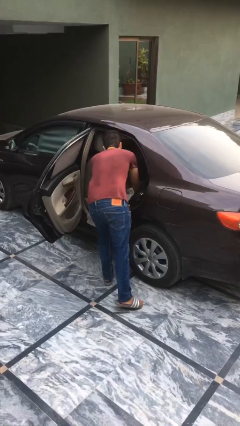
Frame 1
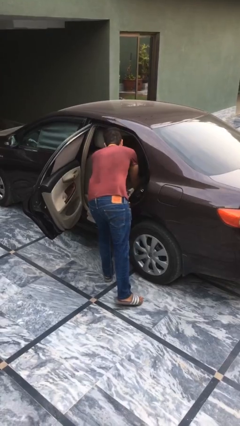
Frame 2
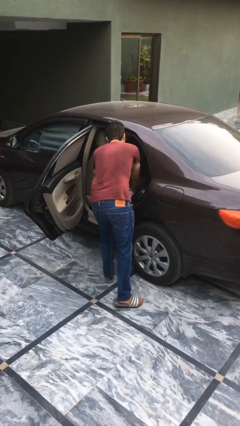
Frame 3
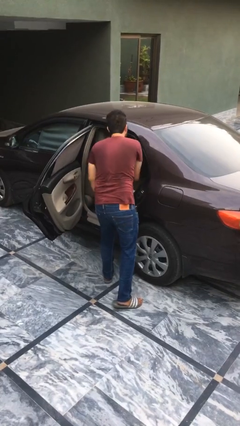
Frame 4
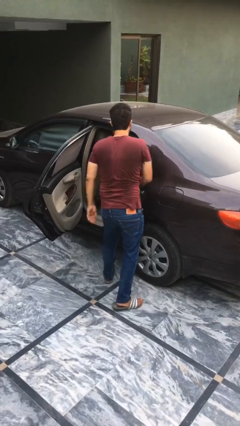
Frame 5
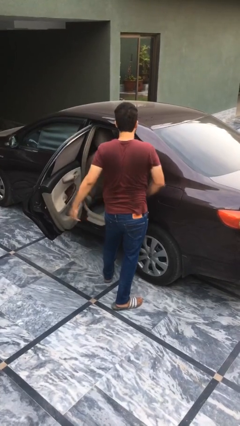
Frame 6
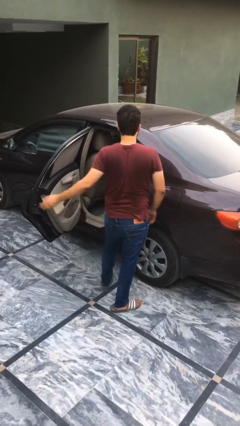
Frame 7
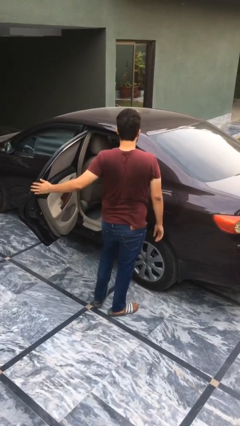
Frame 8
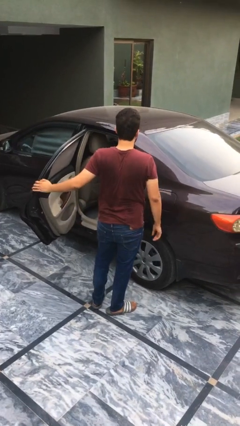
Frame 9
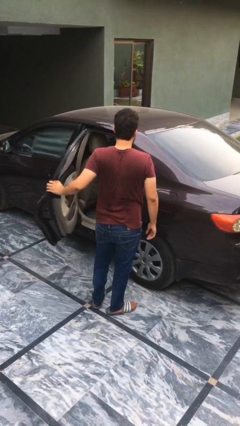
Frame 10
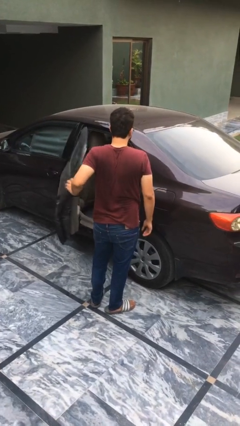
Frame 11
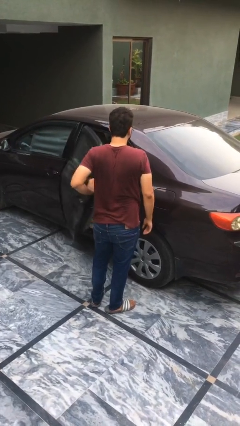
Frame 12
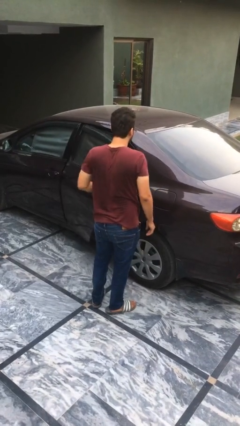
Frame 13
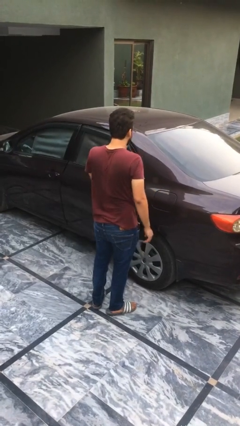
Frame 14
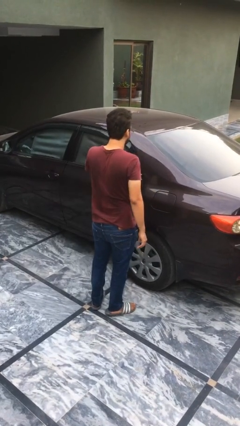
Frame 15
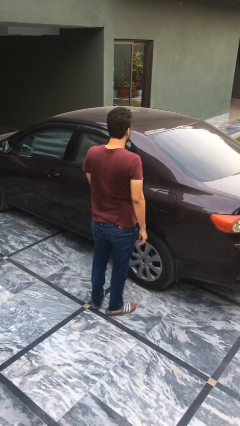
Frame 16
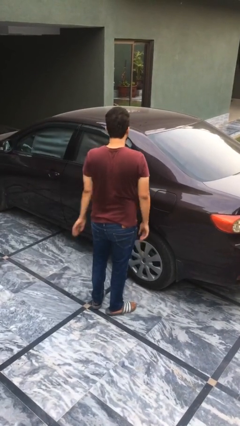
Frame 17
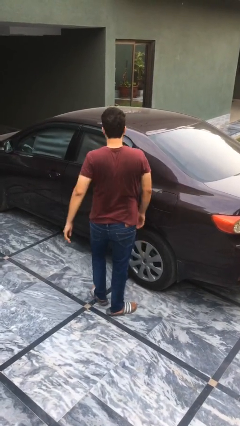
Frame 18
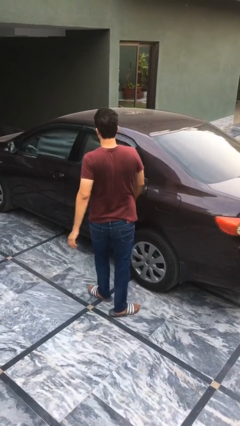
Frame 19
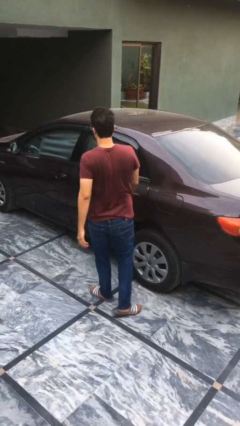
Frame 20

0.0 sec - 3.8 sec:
person closes car door

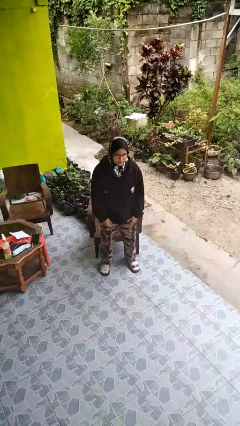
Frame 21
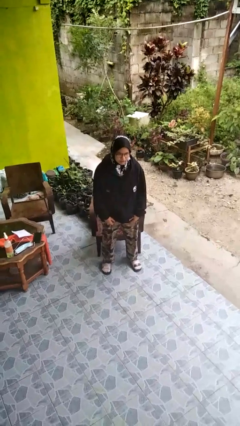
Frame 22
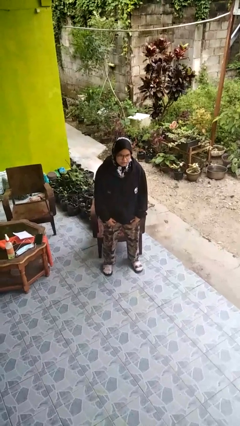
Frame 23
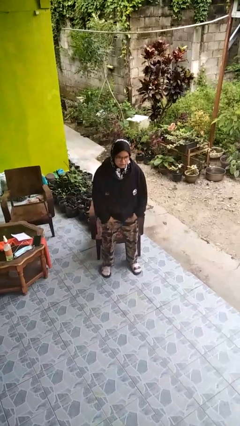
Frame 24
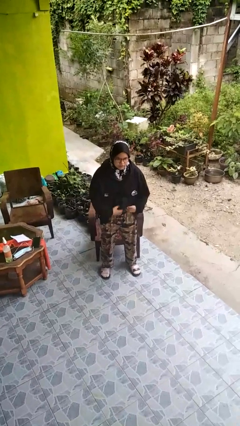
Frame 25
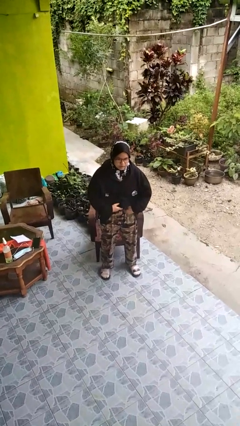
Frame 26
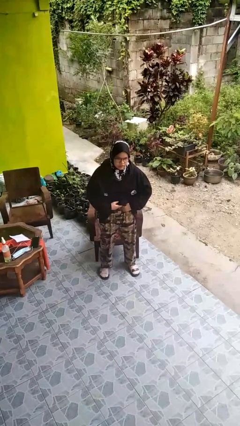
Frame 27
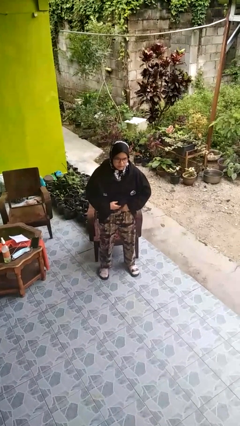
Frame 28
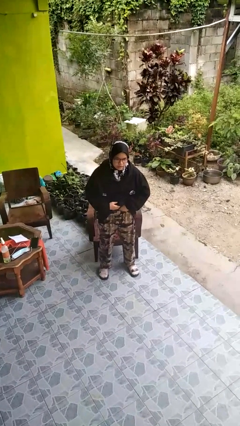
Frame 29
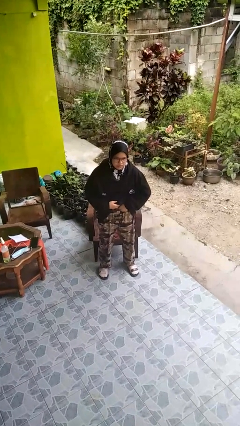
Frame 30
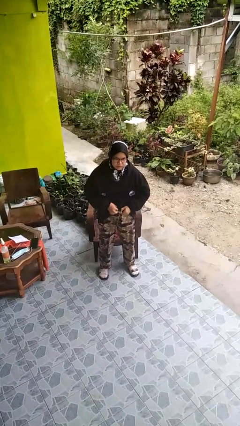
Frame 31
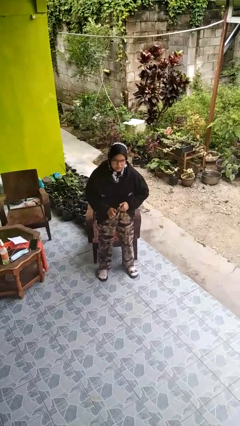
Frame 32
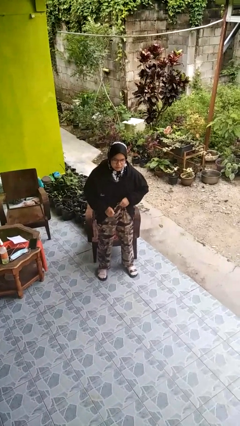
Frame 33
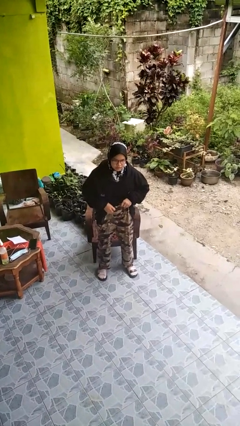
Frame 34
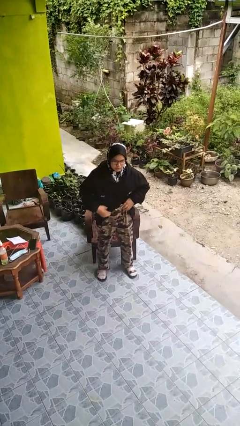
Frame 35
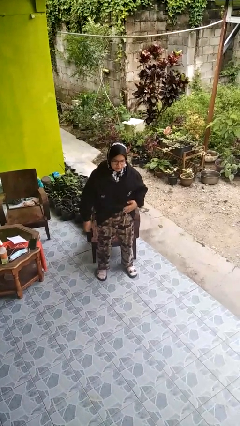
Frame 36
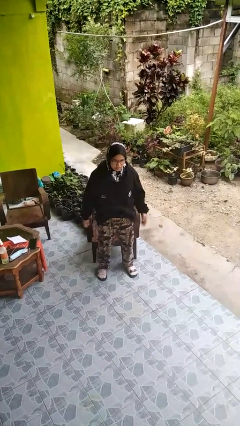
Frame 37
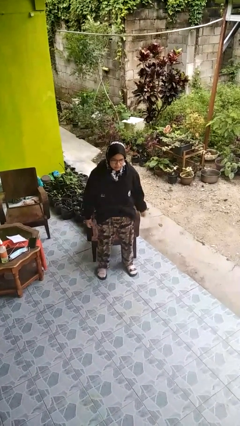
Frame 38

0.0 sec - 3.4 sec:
person tucks in shirt

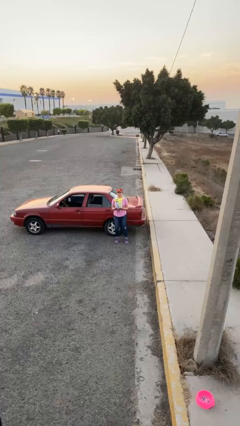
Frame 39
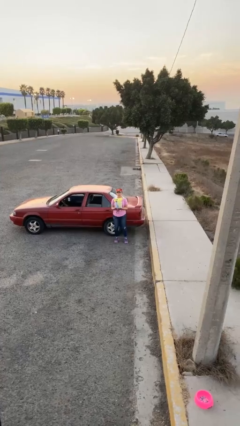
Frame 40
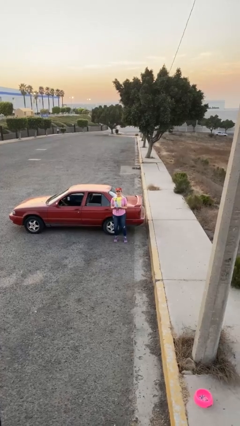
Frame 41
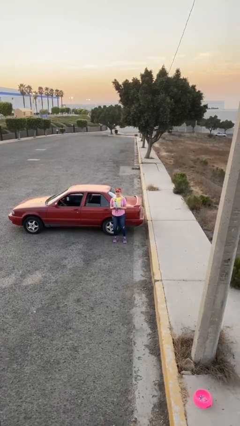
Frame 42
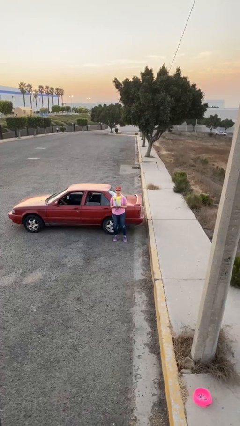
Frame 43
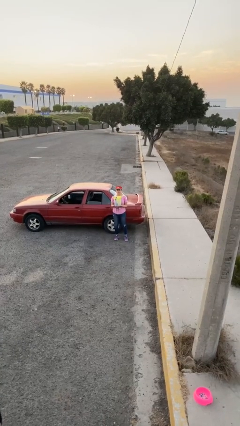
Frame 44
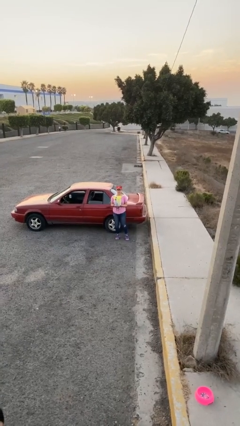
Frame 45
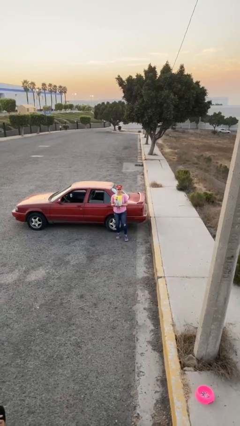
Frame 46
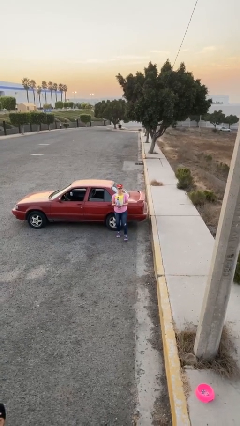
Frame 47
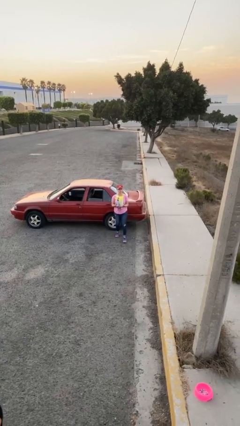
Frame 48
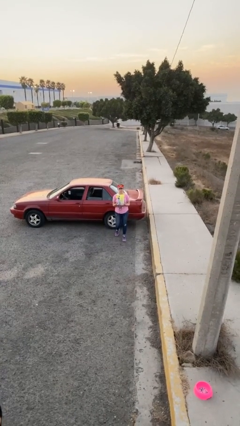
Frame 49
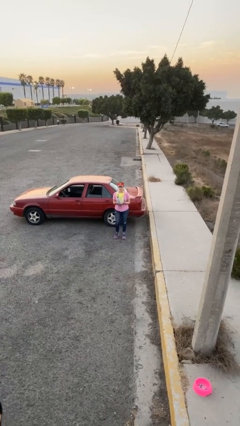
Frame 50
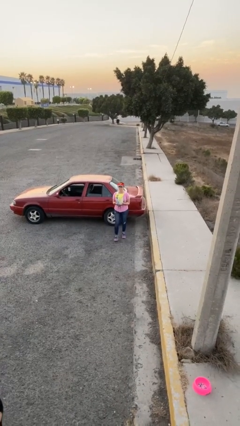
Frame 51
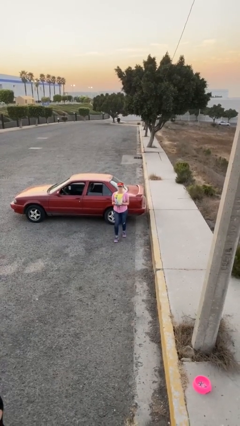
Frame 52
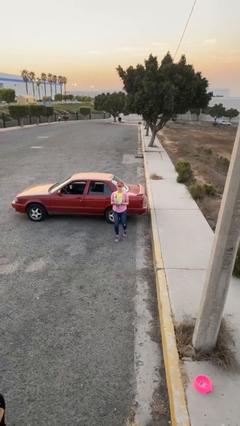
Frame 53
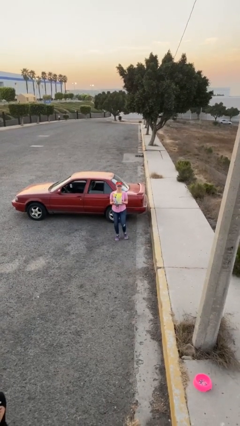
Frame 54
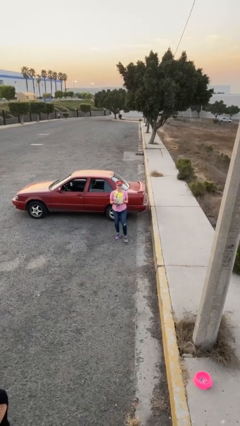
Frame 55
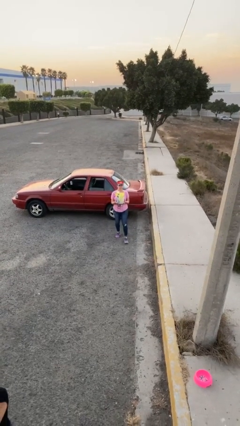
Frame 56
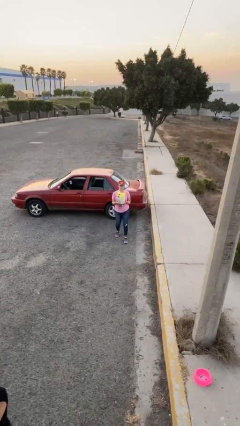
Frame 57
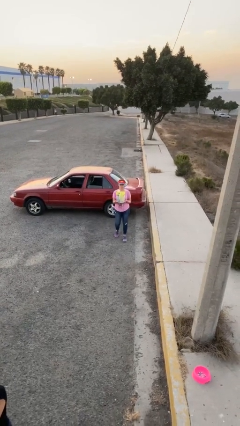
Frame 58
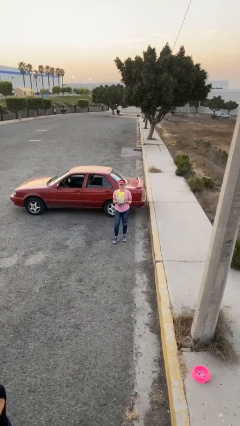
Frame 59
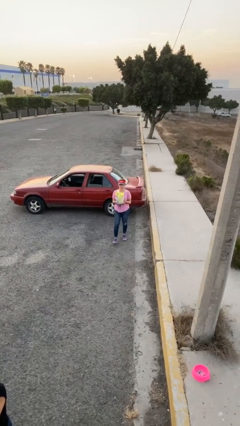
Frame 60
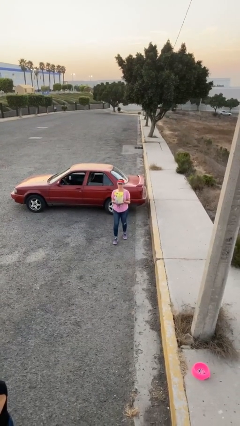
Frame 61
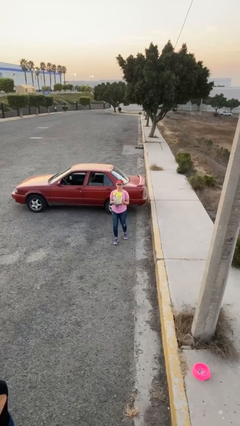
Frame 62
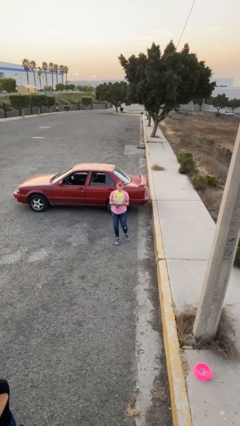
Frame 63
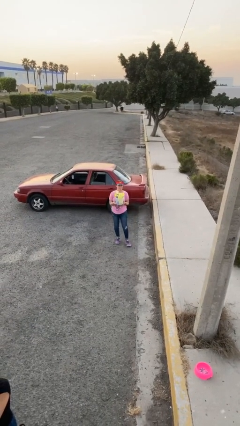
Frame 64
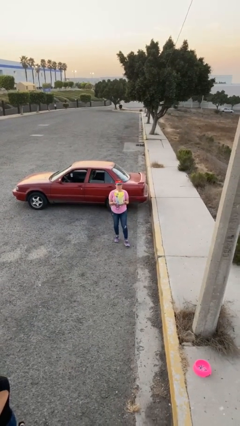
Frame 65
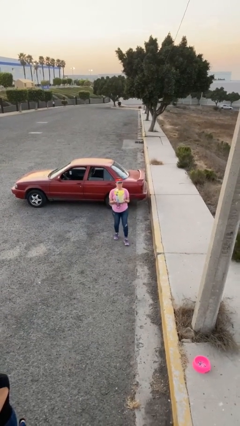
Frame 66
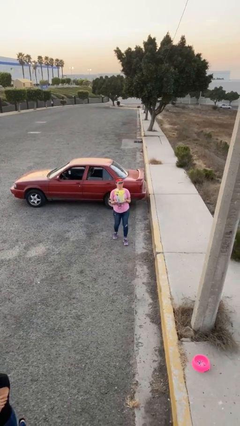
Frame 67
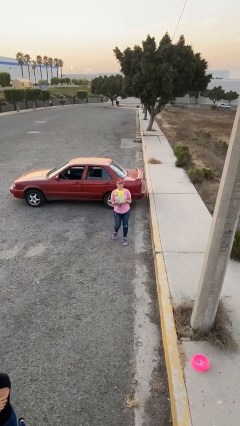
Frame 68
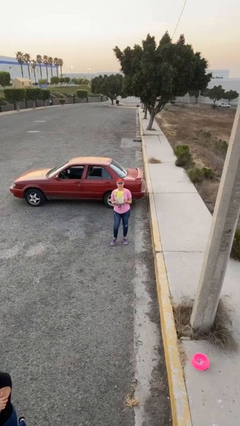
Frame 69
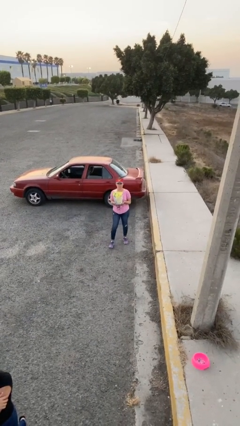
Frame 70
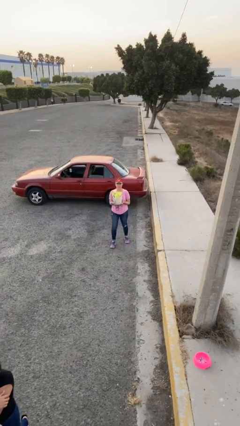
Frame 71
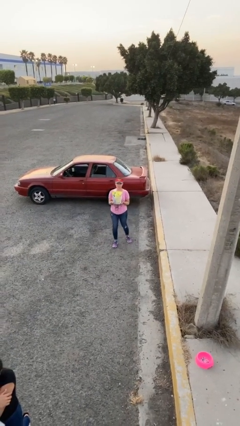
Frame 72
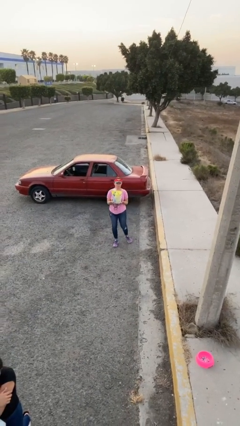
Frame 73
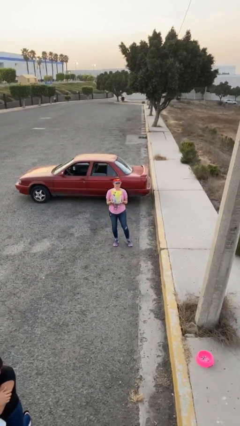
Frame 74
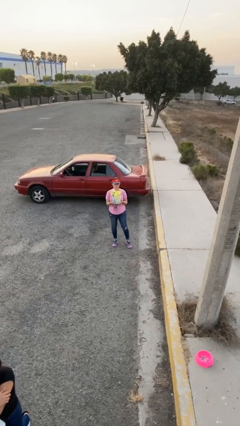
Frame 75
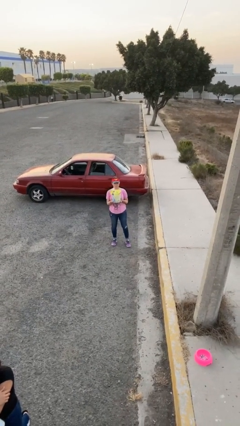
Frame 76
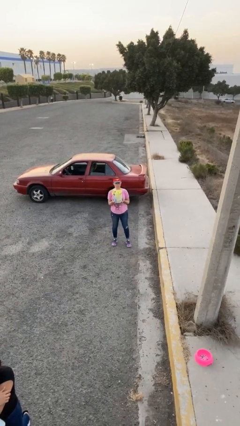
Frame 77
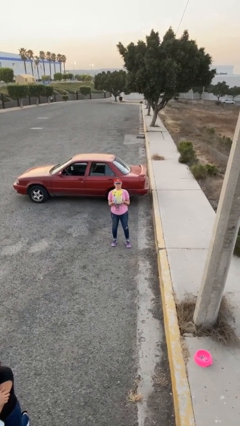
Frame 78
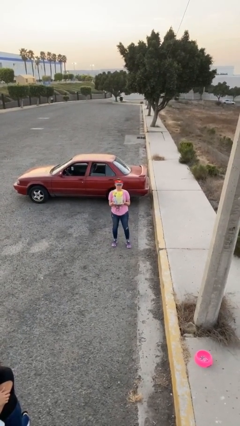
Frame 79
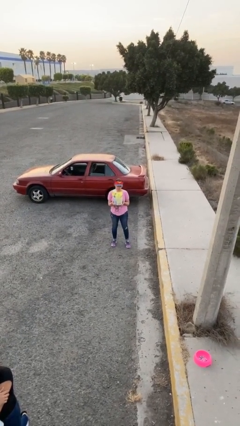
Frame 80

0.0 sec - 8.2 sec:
person carries heavy object

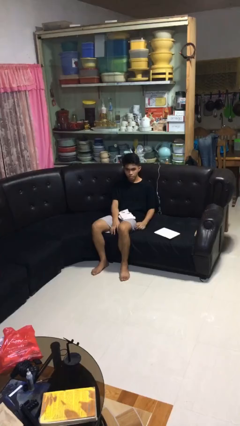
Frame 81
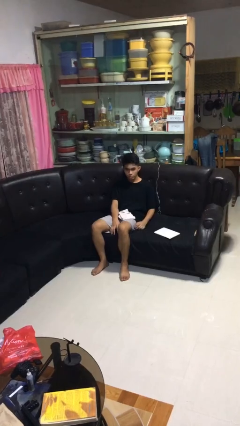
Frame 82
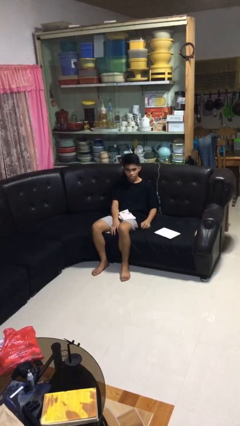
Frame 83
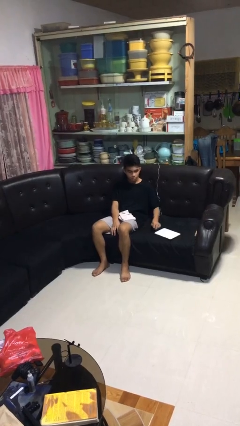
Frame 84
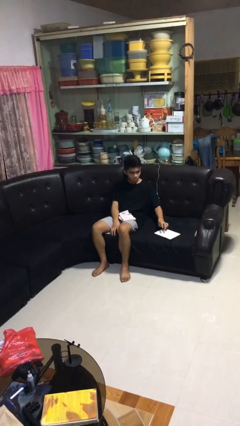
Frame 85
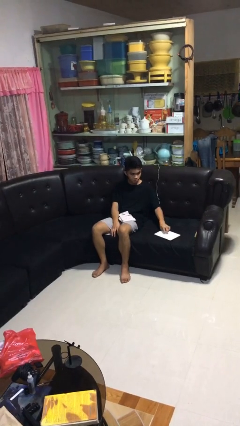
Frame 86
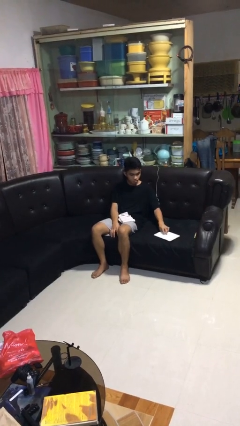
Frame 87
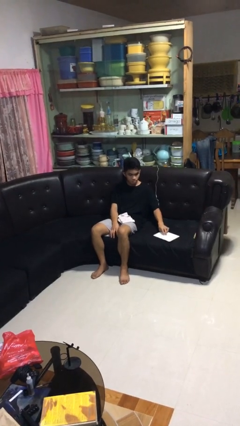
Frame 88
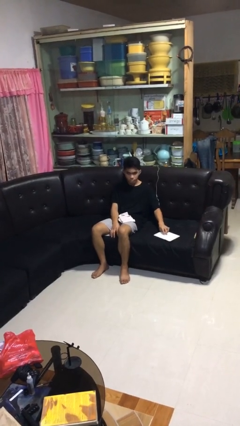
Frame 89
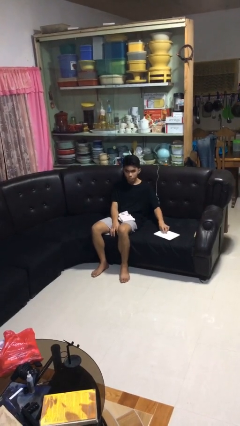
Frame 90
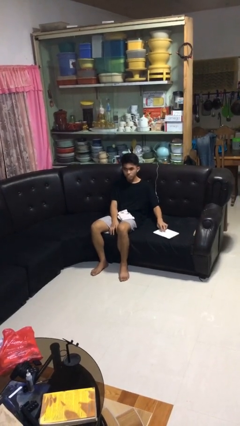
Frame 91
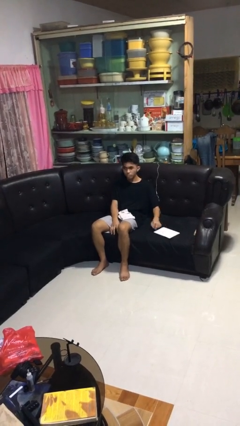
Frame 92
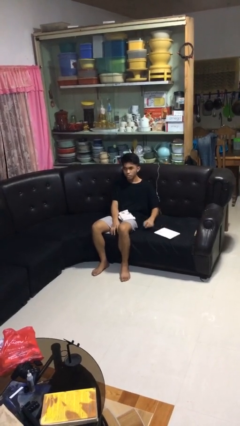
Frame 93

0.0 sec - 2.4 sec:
person taps object with finger

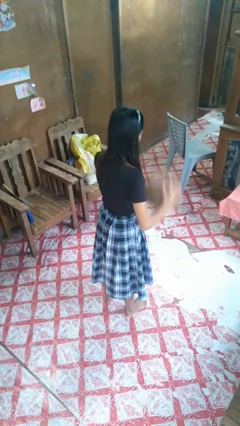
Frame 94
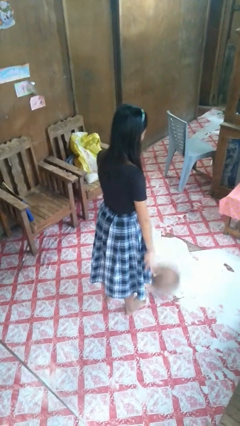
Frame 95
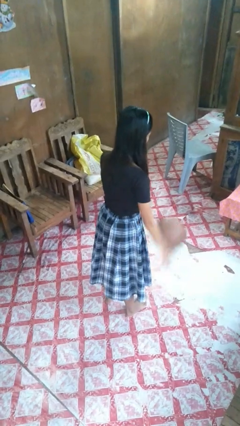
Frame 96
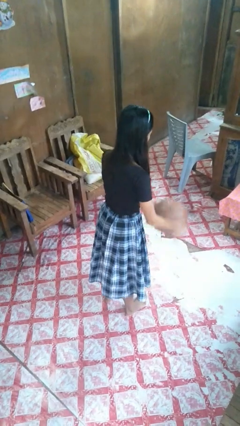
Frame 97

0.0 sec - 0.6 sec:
person bounces ball on floor
